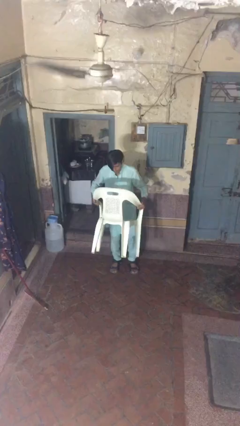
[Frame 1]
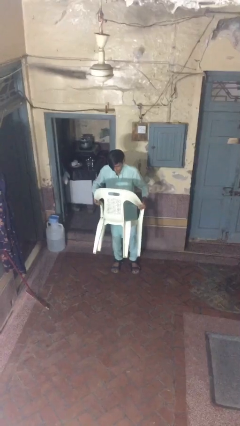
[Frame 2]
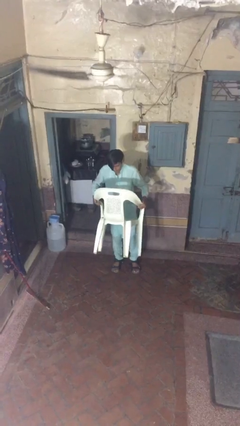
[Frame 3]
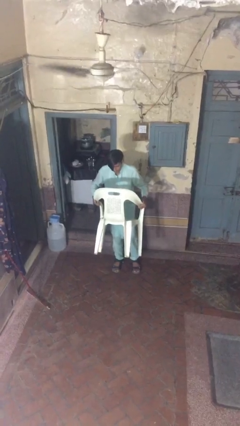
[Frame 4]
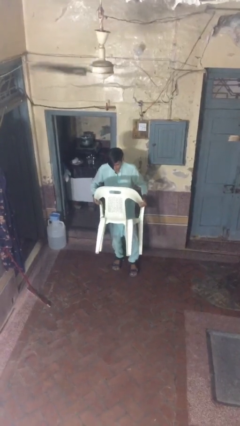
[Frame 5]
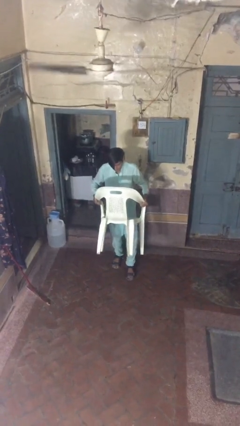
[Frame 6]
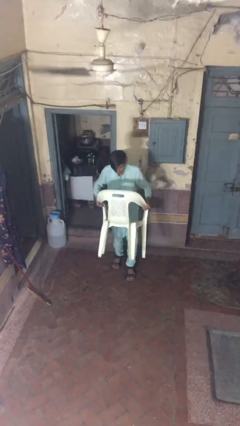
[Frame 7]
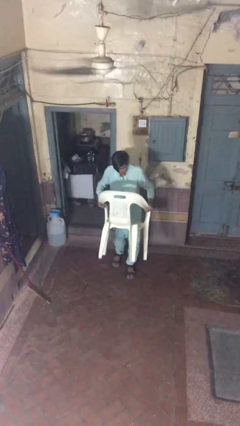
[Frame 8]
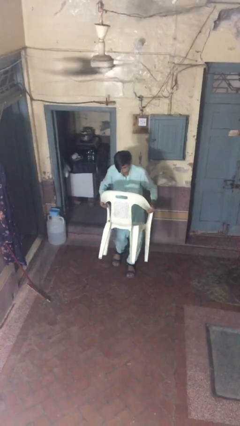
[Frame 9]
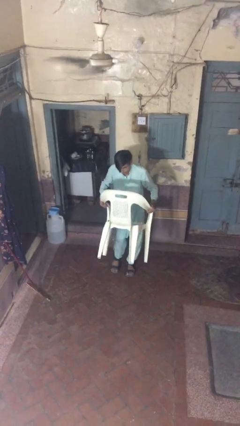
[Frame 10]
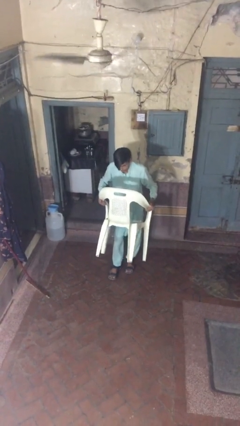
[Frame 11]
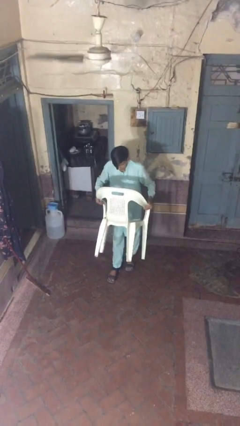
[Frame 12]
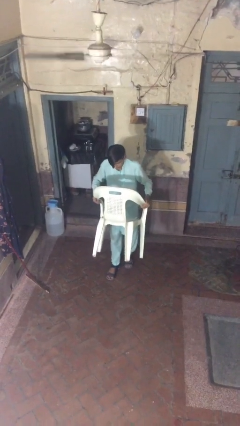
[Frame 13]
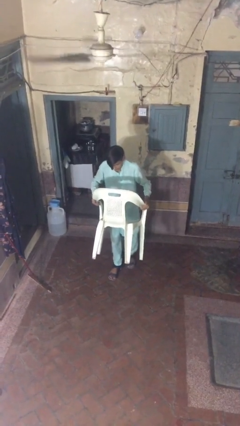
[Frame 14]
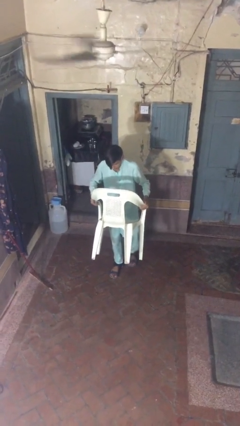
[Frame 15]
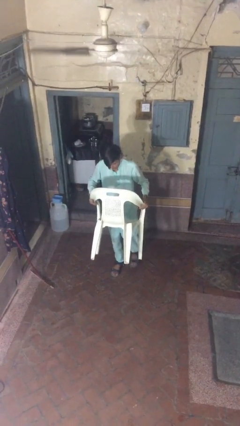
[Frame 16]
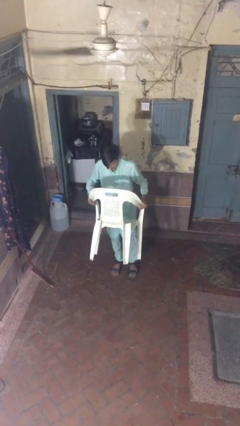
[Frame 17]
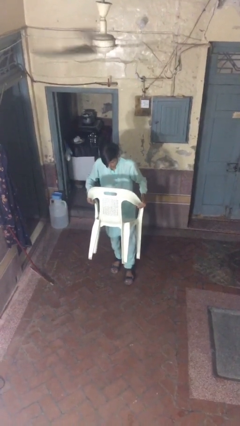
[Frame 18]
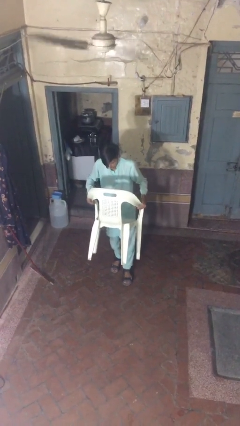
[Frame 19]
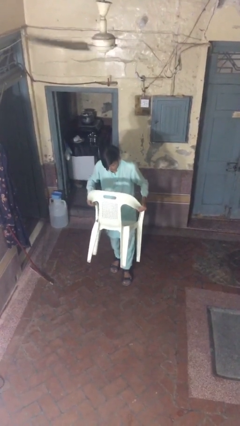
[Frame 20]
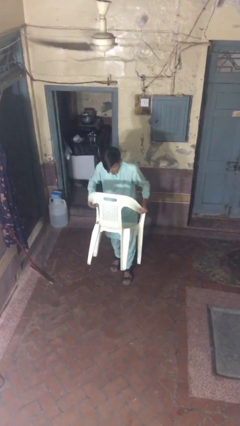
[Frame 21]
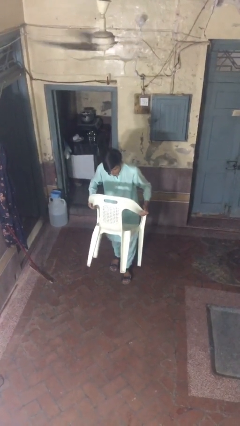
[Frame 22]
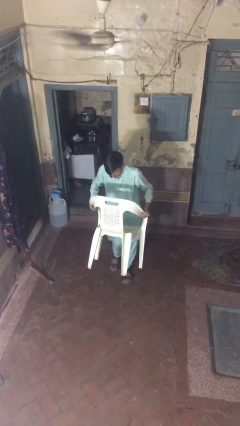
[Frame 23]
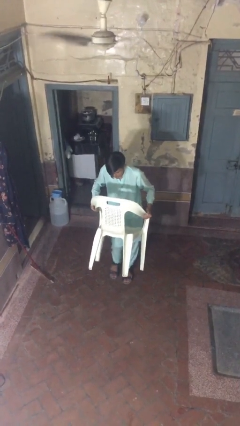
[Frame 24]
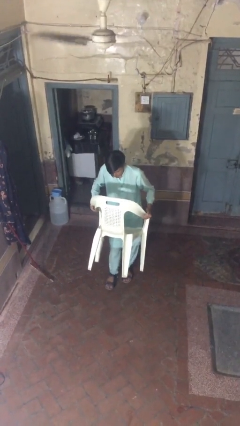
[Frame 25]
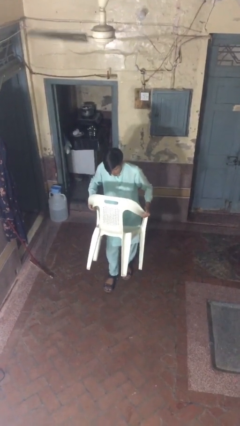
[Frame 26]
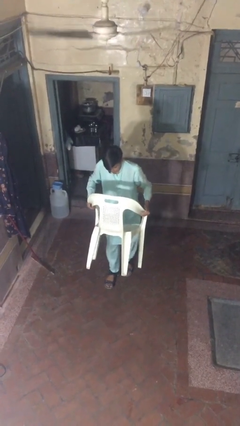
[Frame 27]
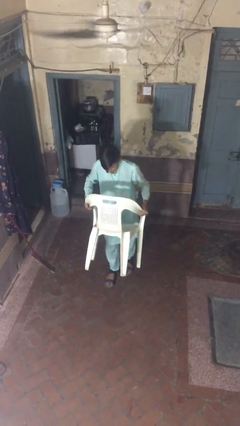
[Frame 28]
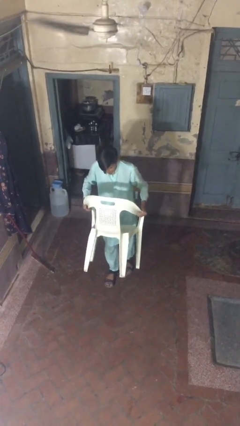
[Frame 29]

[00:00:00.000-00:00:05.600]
person carries heavy object

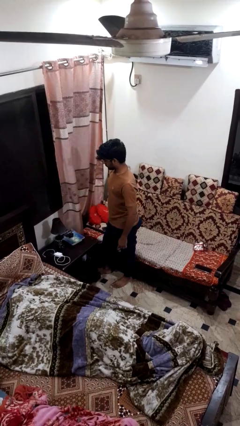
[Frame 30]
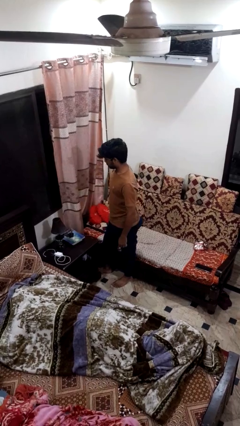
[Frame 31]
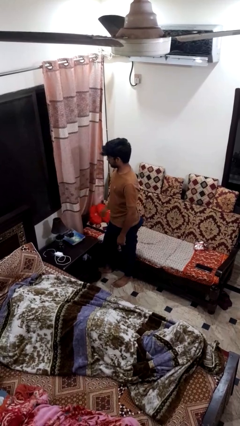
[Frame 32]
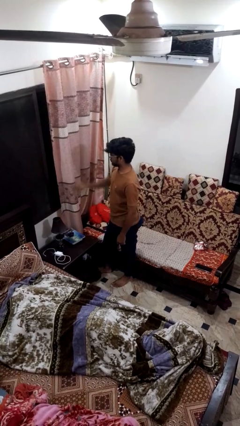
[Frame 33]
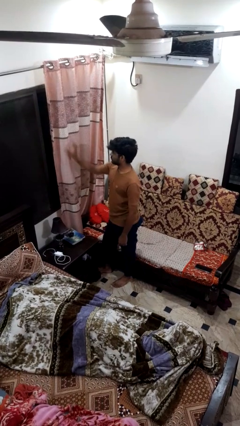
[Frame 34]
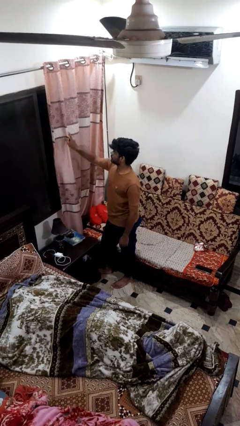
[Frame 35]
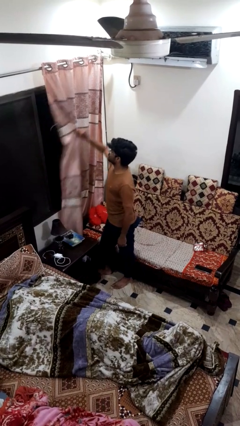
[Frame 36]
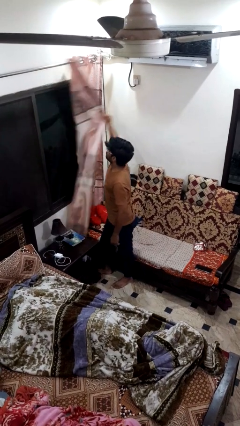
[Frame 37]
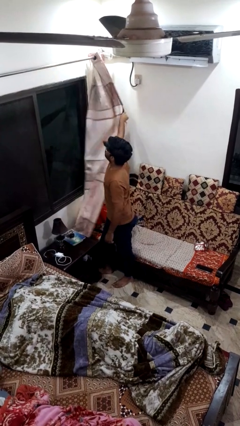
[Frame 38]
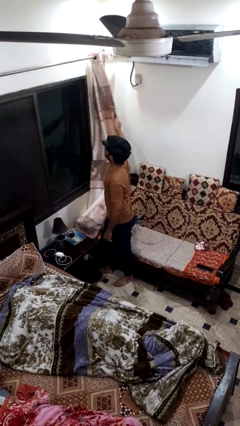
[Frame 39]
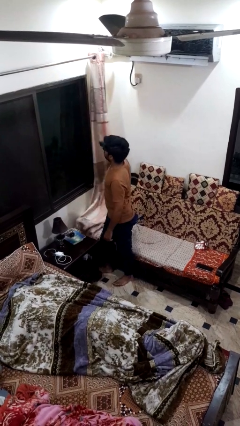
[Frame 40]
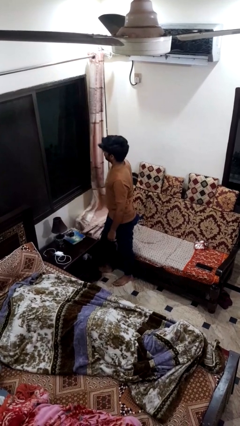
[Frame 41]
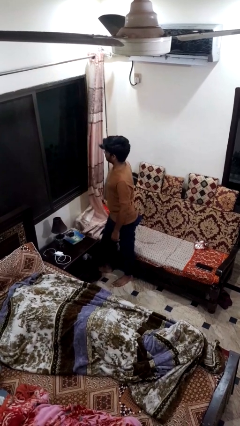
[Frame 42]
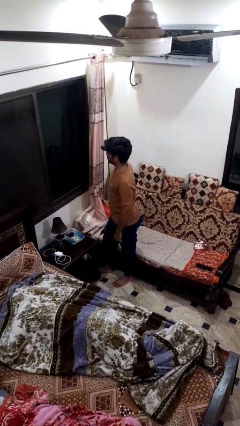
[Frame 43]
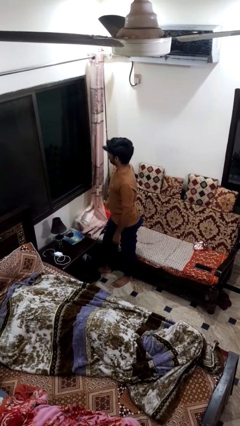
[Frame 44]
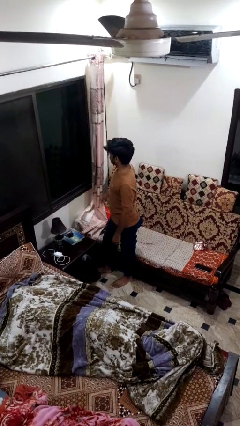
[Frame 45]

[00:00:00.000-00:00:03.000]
person opens curtains

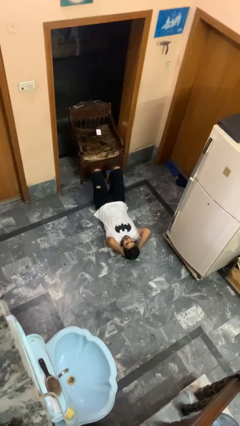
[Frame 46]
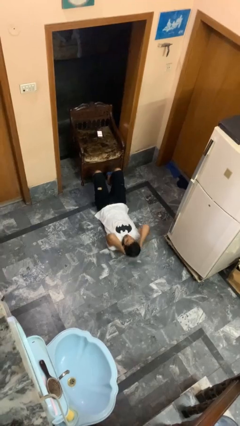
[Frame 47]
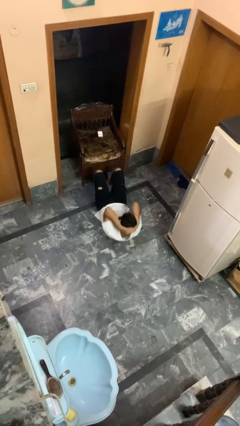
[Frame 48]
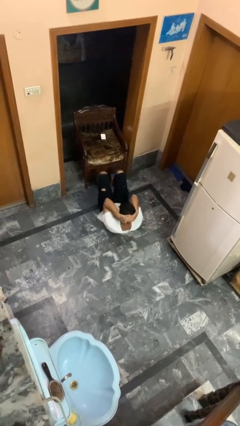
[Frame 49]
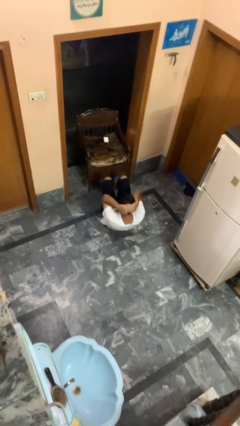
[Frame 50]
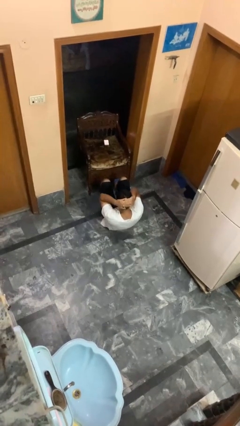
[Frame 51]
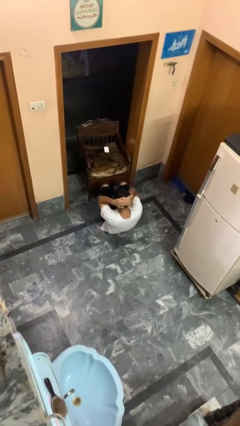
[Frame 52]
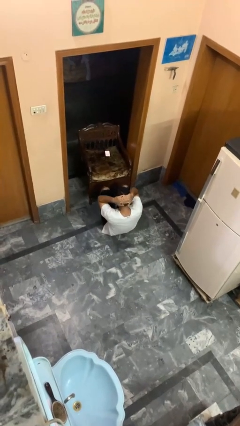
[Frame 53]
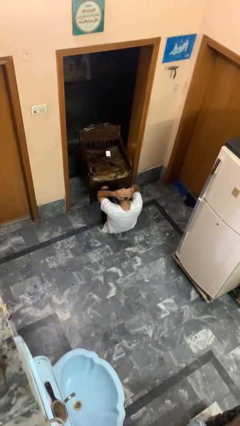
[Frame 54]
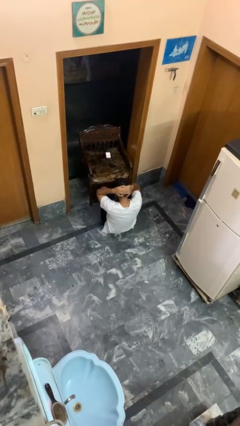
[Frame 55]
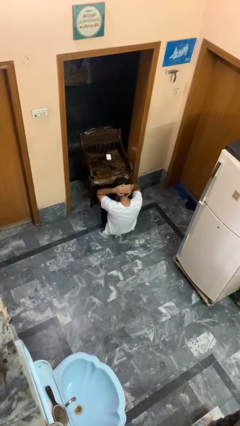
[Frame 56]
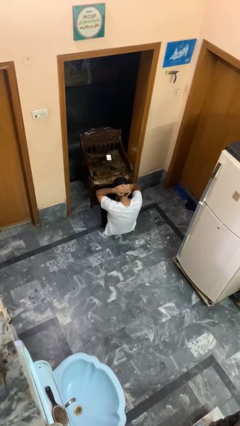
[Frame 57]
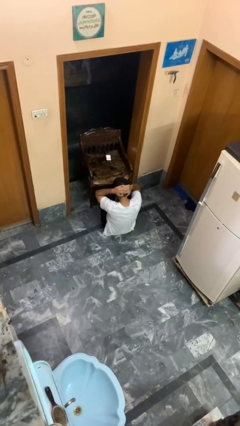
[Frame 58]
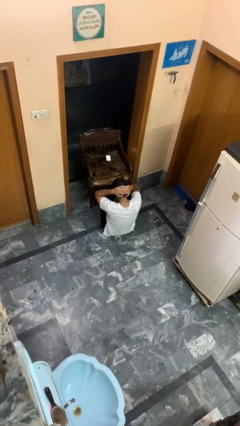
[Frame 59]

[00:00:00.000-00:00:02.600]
person exercises with situp

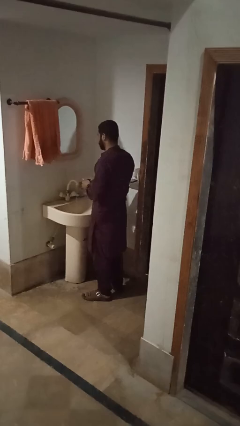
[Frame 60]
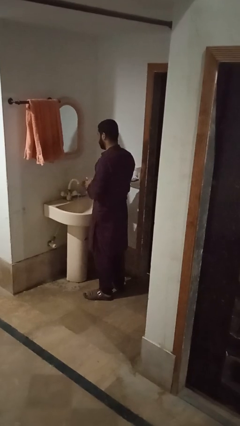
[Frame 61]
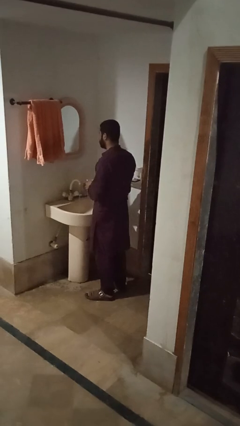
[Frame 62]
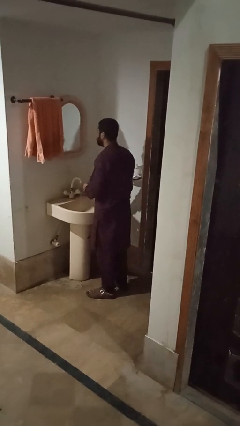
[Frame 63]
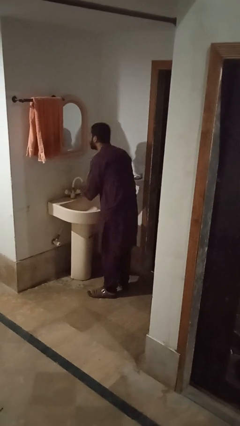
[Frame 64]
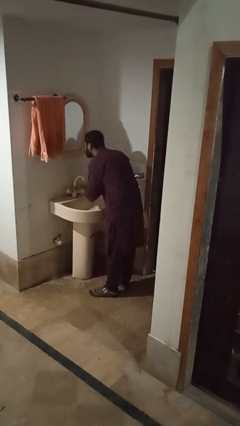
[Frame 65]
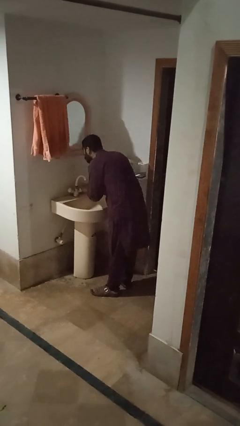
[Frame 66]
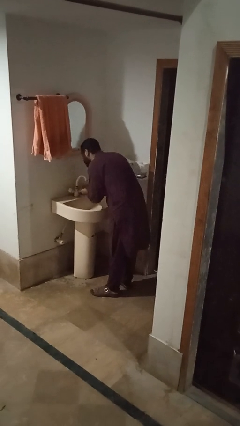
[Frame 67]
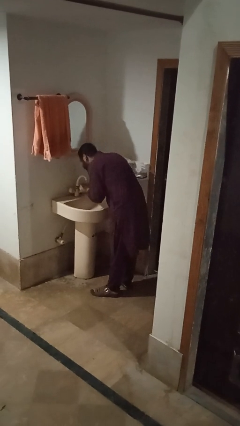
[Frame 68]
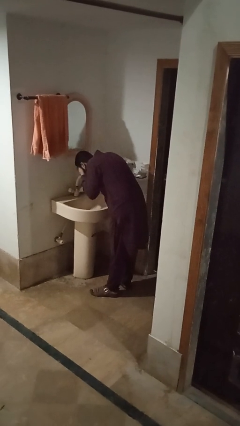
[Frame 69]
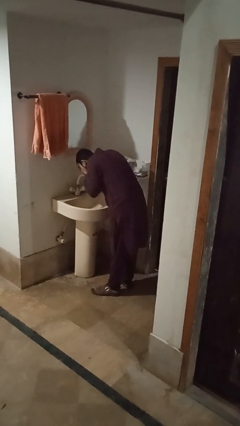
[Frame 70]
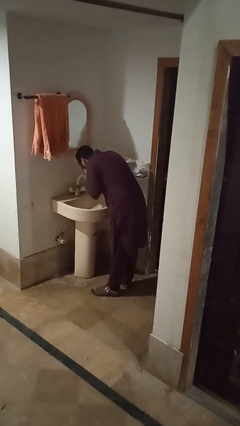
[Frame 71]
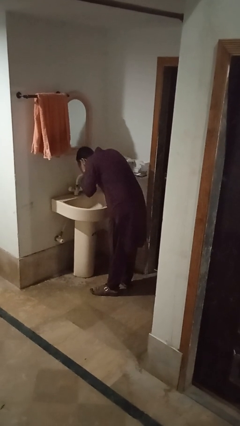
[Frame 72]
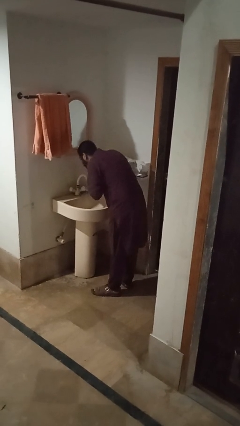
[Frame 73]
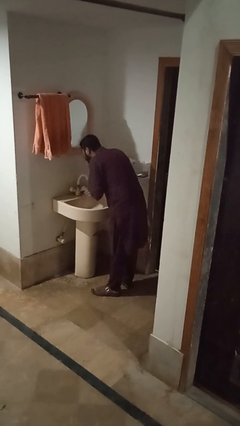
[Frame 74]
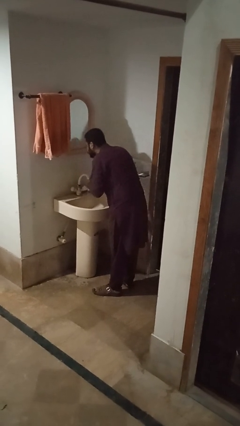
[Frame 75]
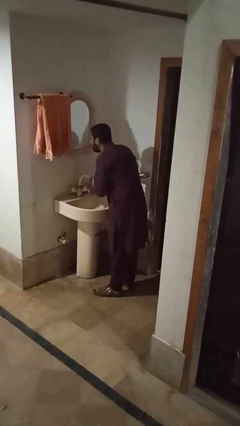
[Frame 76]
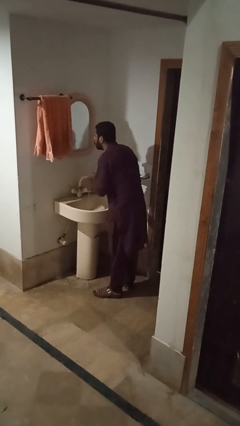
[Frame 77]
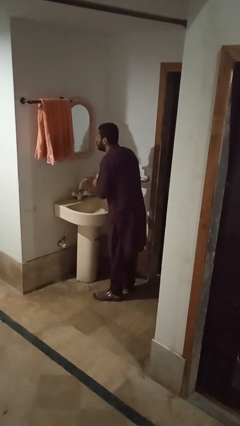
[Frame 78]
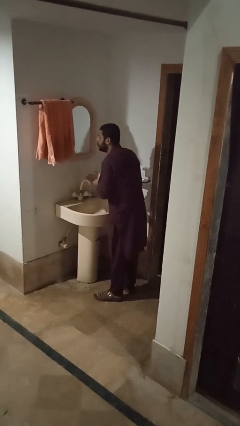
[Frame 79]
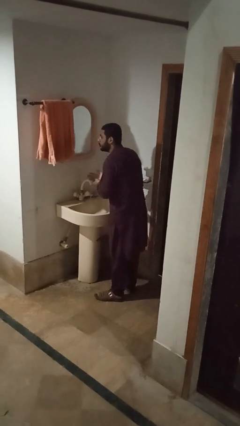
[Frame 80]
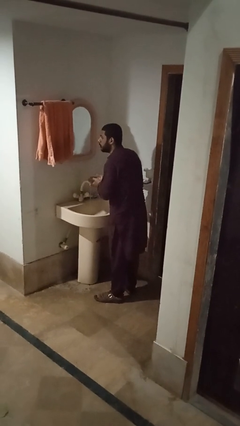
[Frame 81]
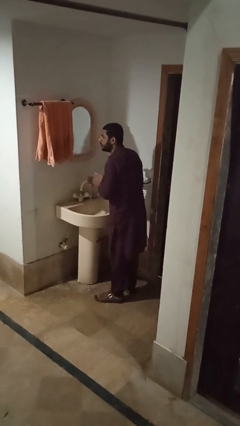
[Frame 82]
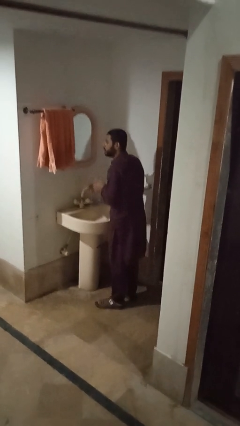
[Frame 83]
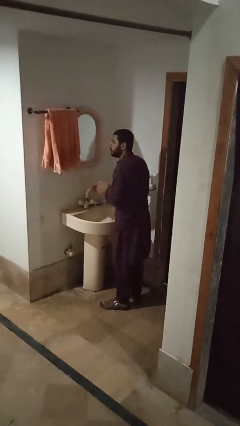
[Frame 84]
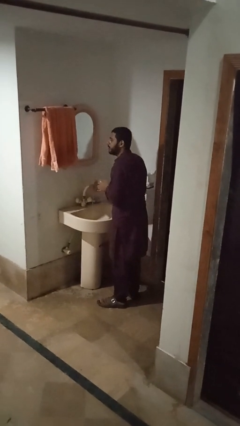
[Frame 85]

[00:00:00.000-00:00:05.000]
person washes face

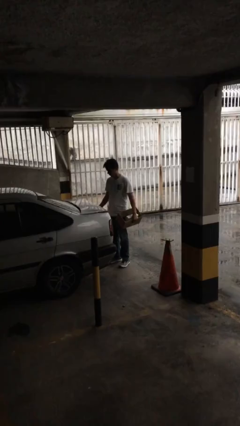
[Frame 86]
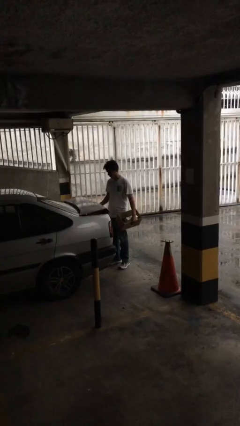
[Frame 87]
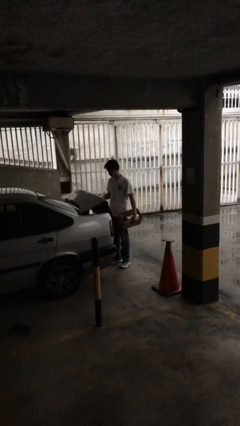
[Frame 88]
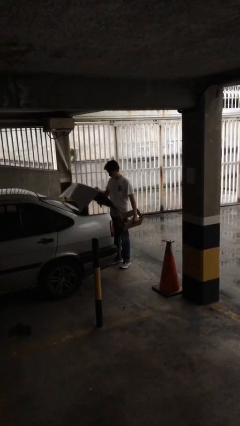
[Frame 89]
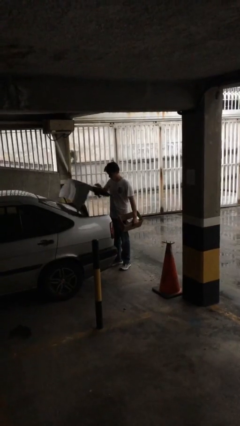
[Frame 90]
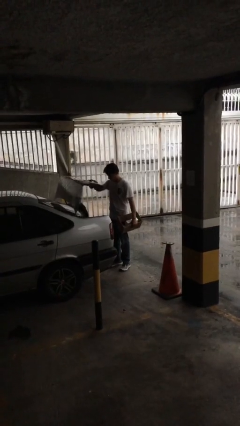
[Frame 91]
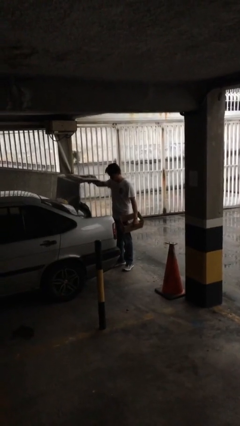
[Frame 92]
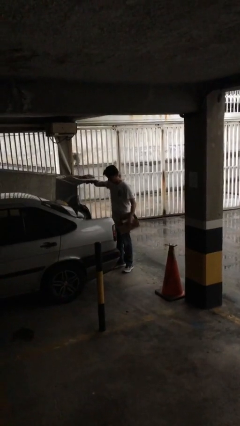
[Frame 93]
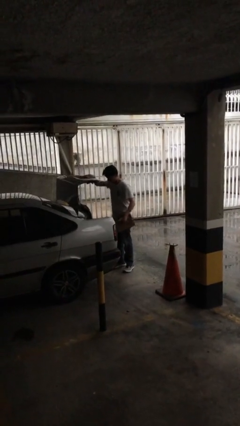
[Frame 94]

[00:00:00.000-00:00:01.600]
person opens car trunk
